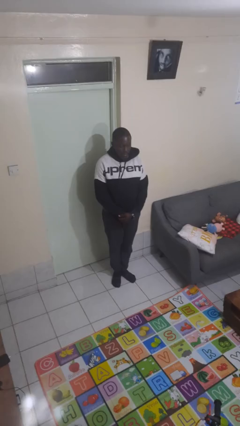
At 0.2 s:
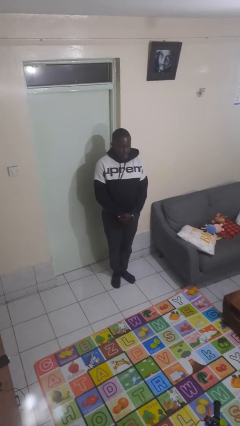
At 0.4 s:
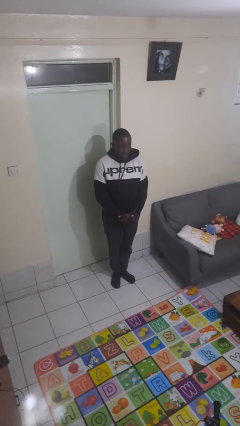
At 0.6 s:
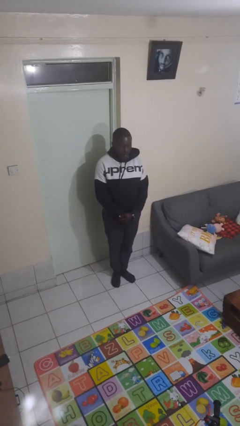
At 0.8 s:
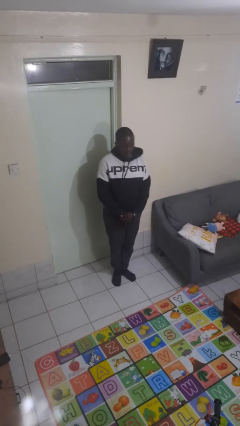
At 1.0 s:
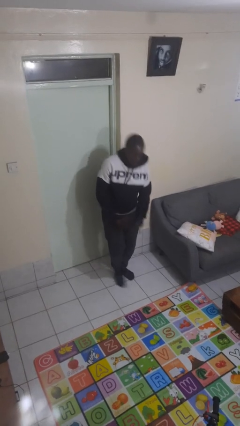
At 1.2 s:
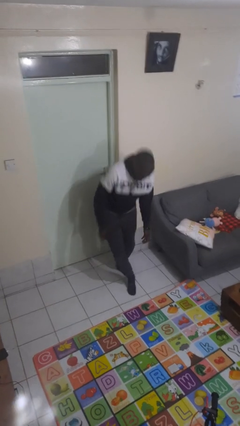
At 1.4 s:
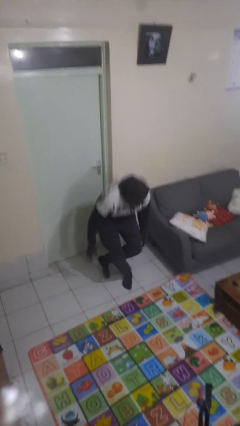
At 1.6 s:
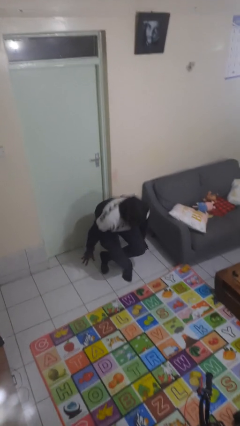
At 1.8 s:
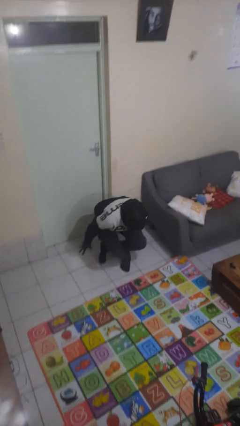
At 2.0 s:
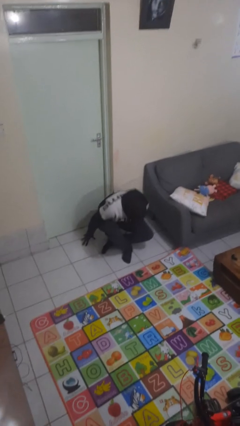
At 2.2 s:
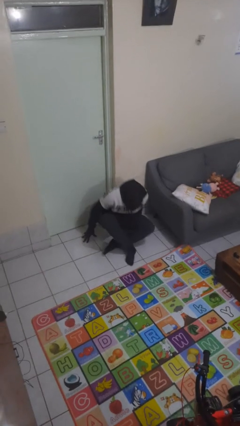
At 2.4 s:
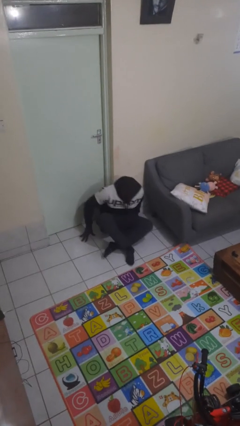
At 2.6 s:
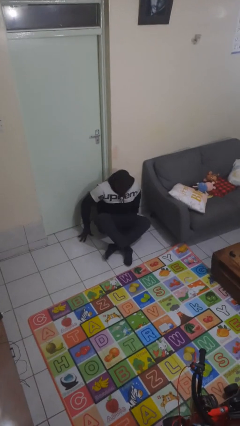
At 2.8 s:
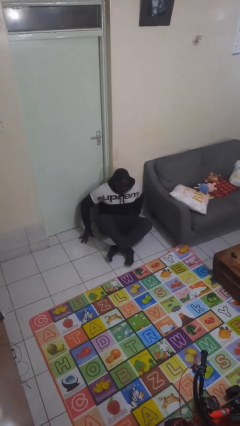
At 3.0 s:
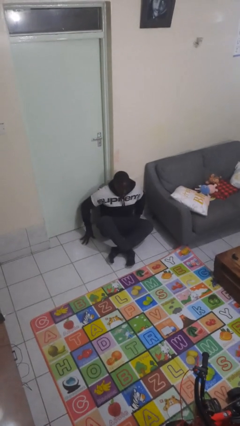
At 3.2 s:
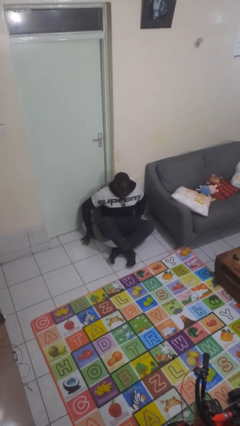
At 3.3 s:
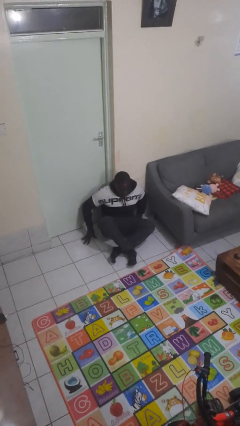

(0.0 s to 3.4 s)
person sits crisscross

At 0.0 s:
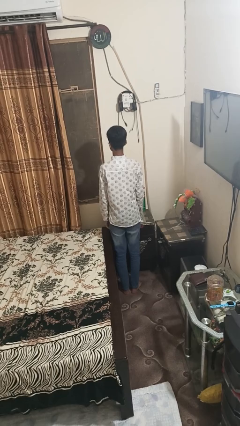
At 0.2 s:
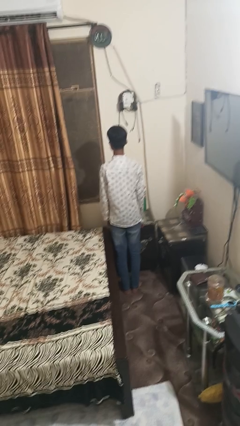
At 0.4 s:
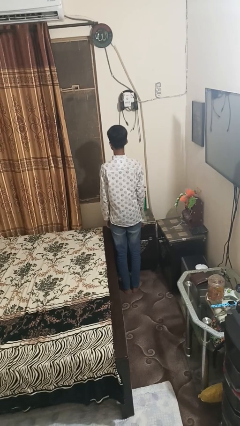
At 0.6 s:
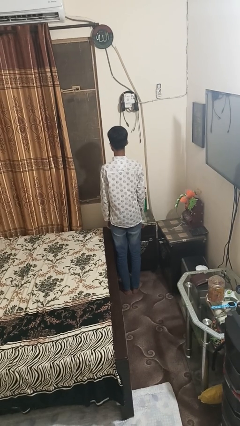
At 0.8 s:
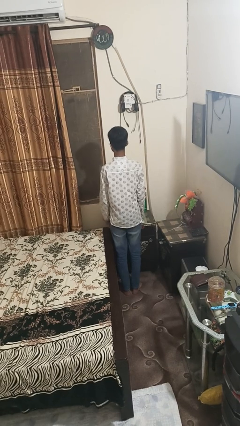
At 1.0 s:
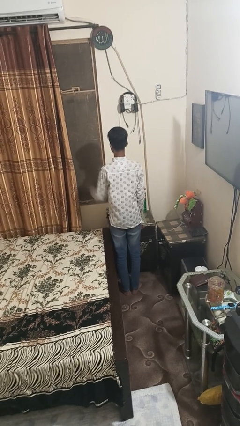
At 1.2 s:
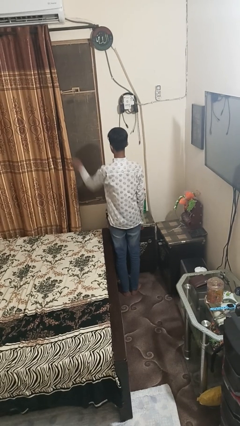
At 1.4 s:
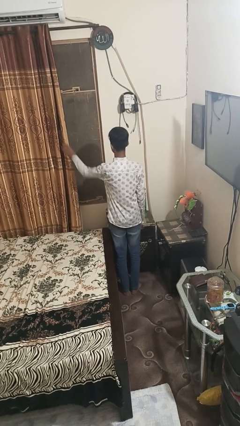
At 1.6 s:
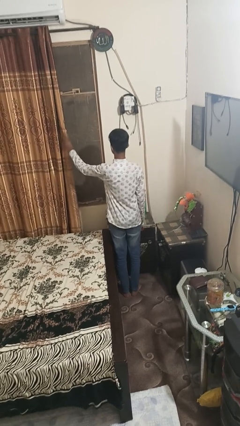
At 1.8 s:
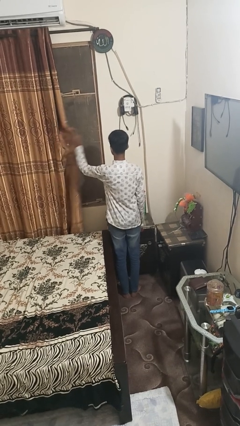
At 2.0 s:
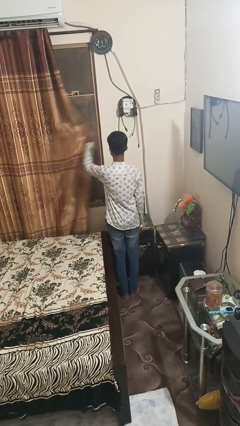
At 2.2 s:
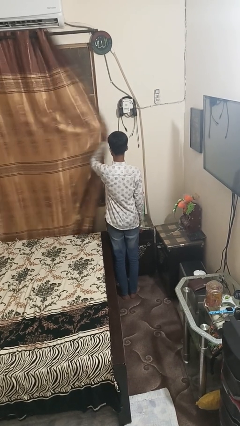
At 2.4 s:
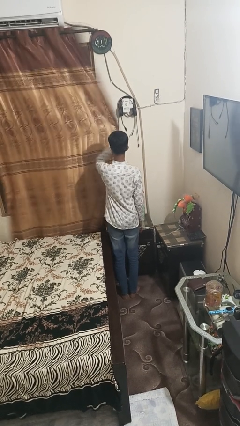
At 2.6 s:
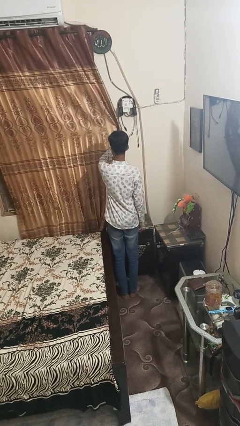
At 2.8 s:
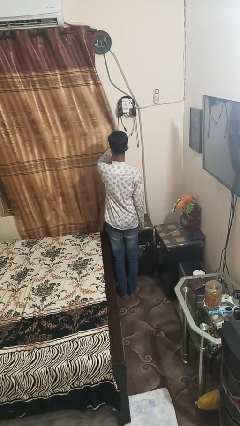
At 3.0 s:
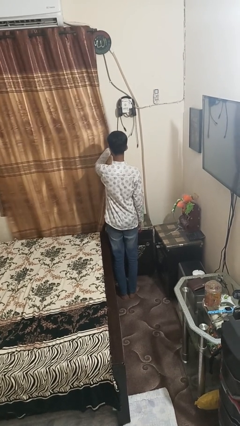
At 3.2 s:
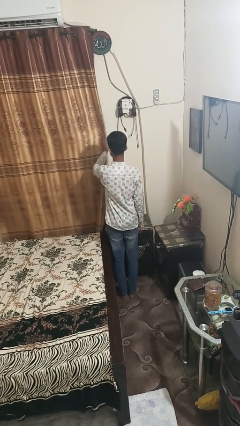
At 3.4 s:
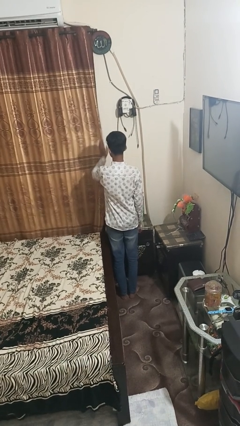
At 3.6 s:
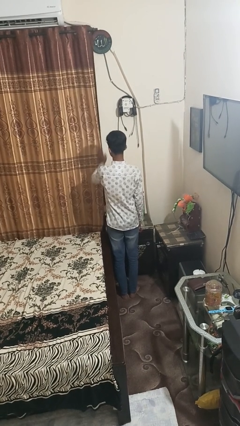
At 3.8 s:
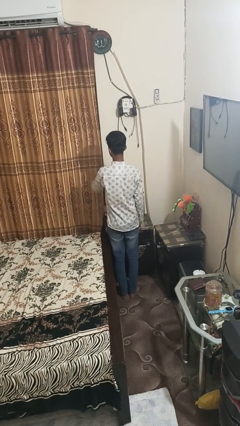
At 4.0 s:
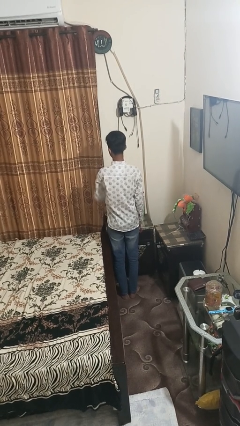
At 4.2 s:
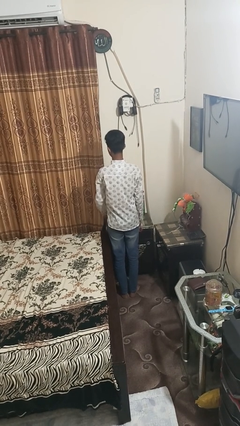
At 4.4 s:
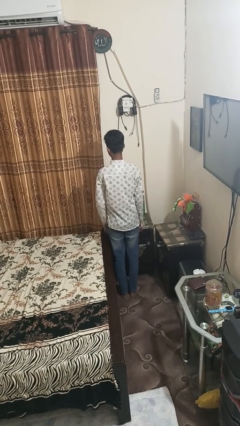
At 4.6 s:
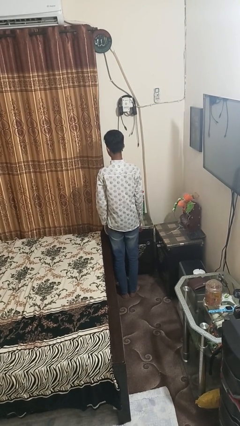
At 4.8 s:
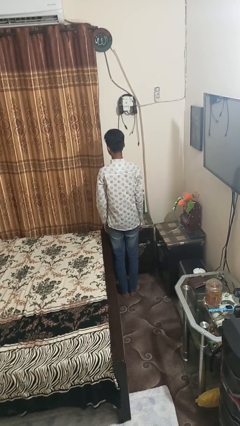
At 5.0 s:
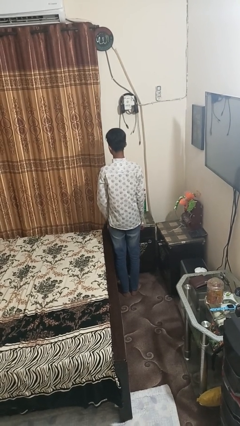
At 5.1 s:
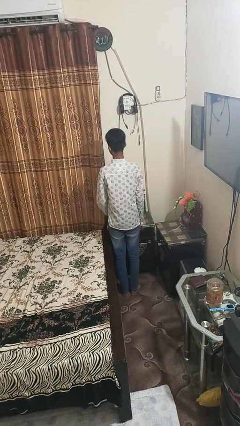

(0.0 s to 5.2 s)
person closes curtains

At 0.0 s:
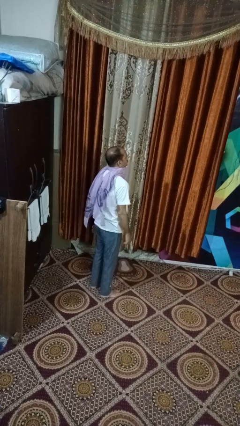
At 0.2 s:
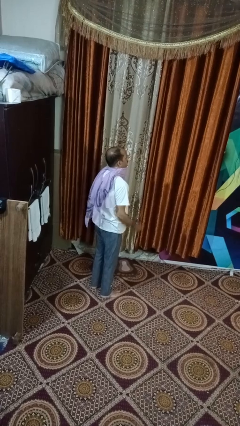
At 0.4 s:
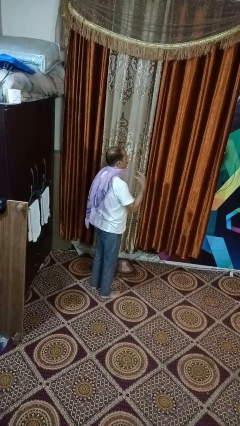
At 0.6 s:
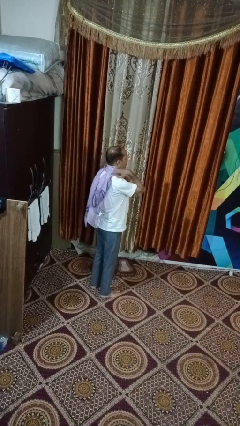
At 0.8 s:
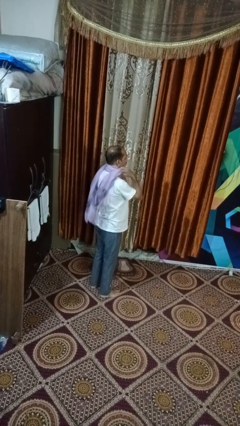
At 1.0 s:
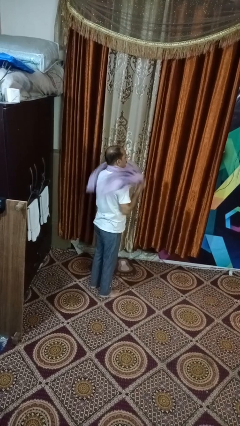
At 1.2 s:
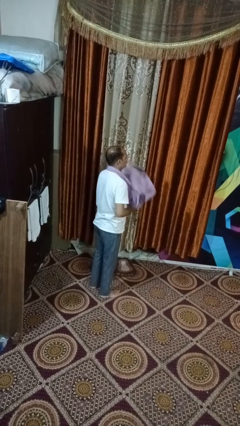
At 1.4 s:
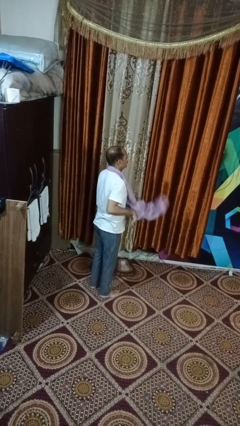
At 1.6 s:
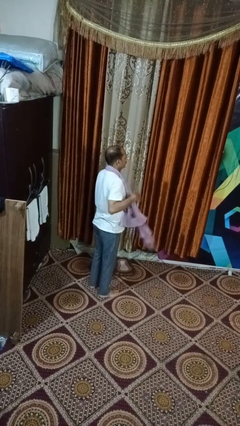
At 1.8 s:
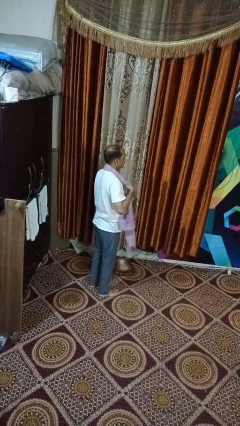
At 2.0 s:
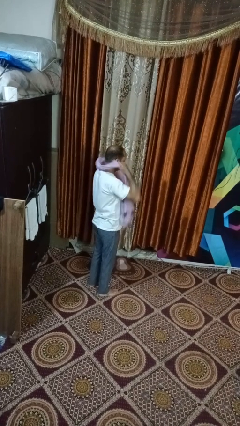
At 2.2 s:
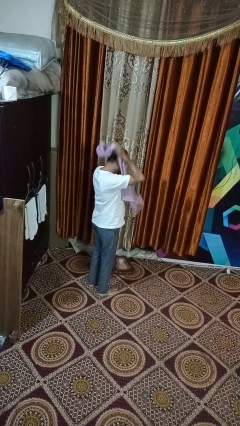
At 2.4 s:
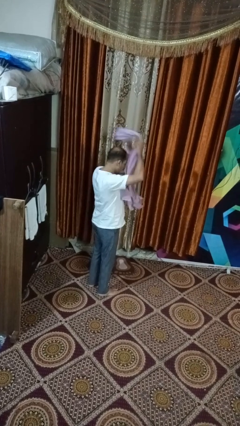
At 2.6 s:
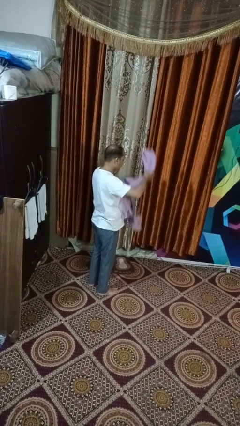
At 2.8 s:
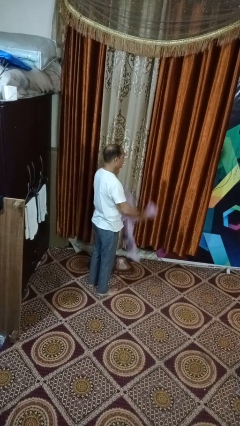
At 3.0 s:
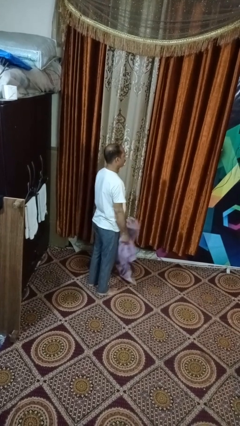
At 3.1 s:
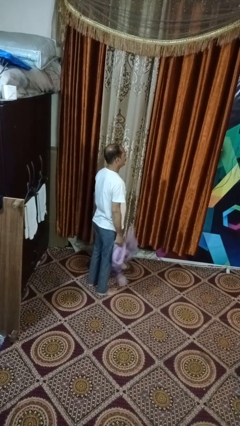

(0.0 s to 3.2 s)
person takes off scarf

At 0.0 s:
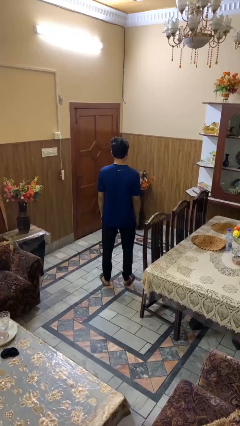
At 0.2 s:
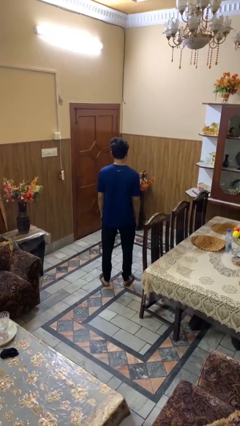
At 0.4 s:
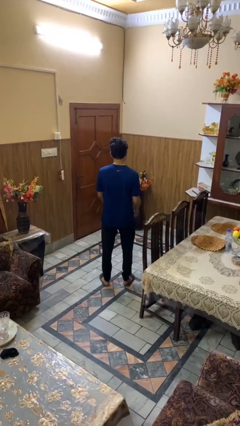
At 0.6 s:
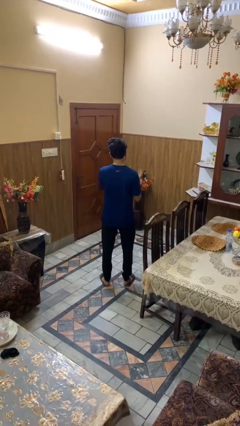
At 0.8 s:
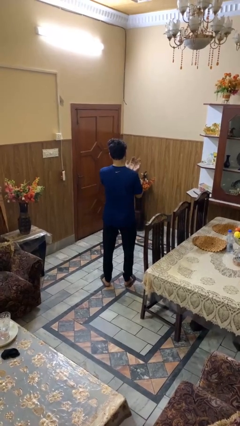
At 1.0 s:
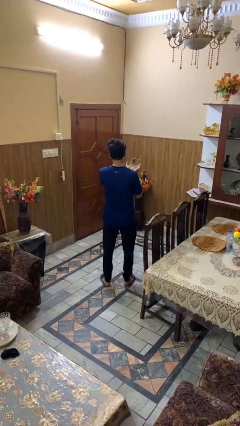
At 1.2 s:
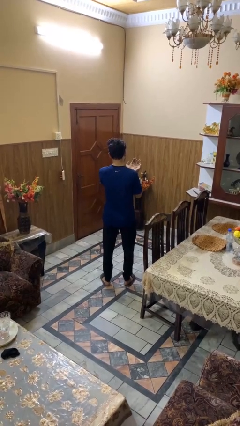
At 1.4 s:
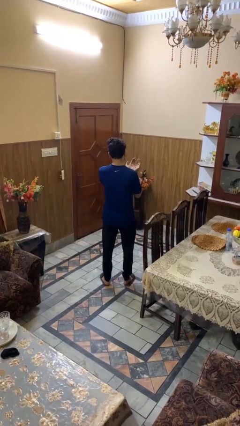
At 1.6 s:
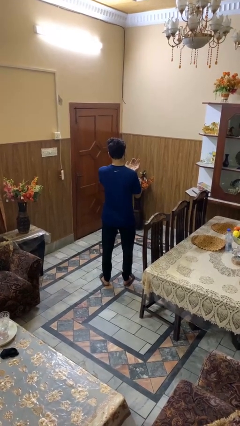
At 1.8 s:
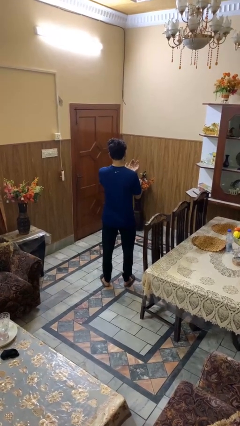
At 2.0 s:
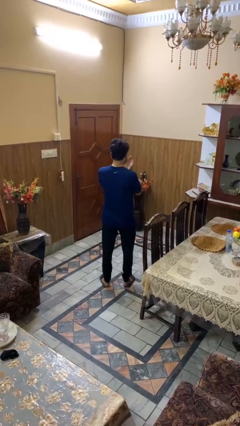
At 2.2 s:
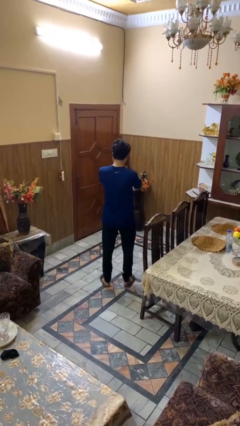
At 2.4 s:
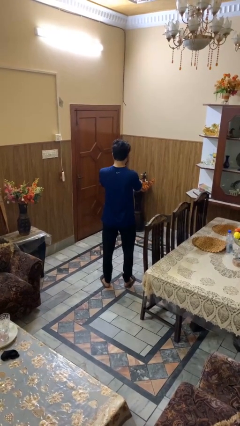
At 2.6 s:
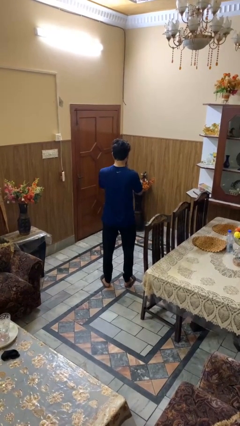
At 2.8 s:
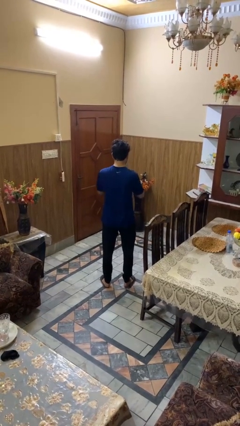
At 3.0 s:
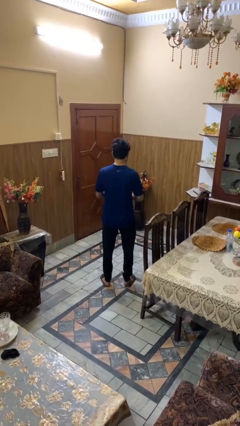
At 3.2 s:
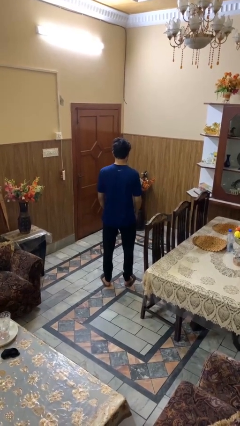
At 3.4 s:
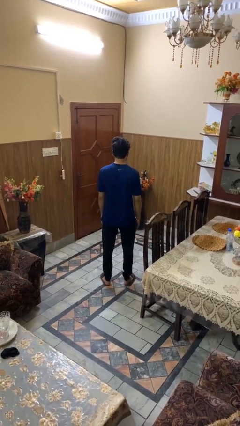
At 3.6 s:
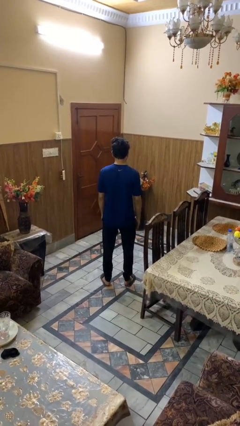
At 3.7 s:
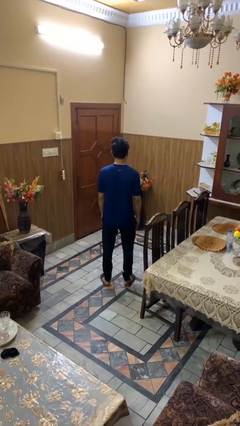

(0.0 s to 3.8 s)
person prays

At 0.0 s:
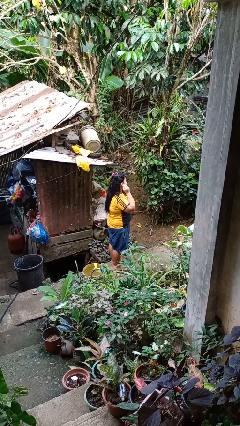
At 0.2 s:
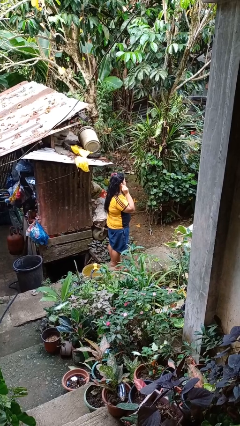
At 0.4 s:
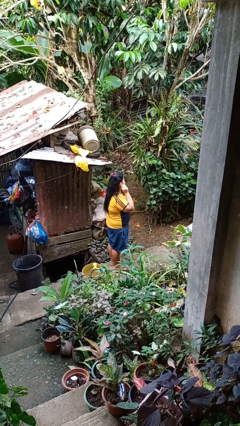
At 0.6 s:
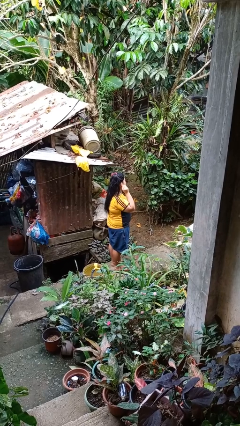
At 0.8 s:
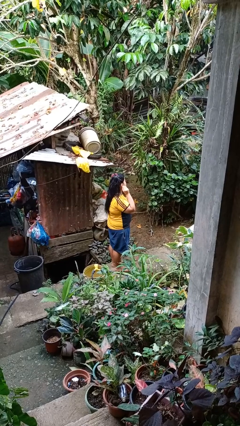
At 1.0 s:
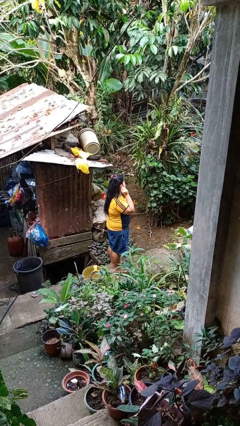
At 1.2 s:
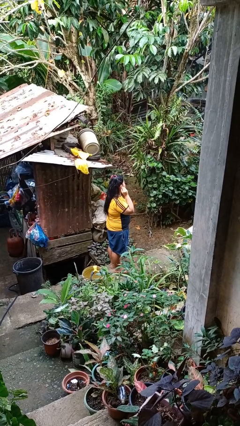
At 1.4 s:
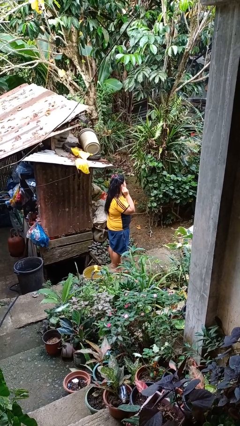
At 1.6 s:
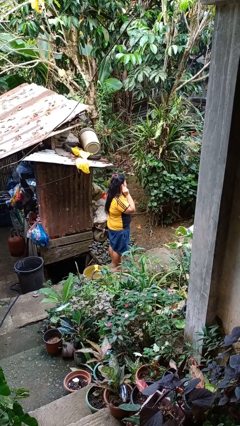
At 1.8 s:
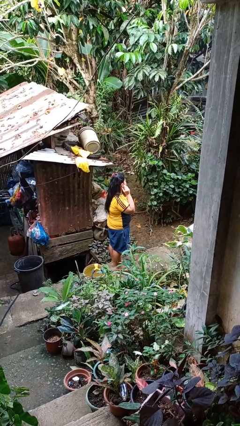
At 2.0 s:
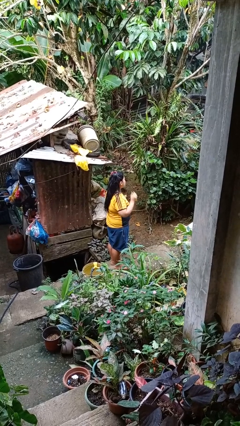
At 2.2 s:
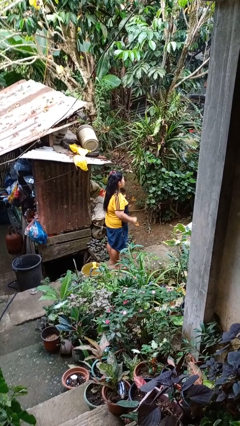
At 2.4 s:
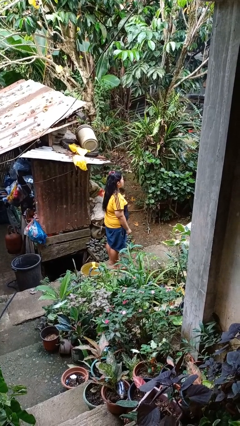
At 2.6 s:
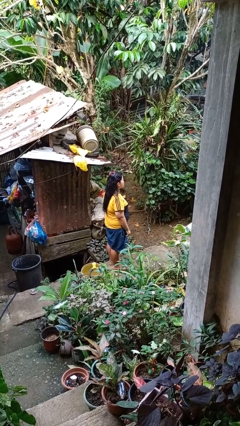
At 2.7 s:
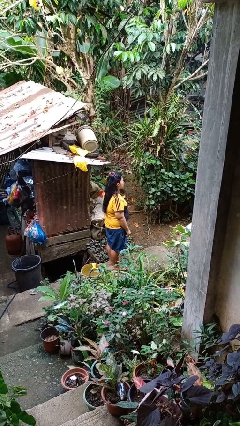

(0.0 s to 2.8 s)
person puts on earrings
